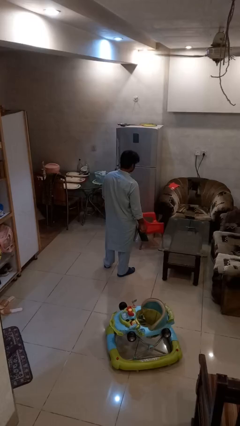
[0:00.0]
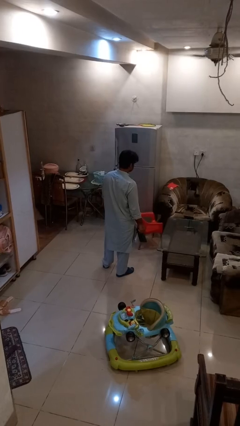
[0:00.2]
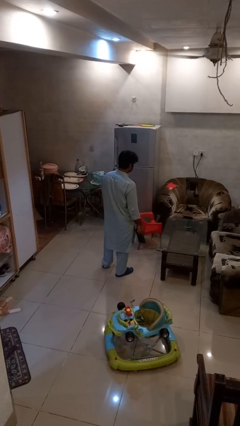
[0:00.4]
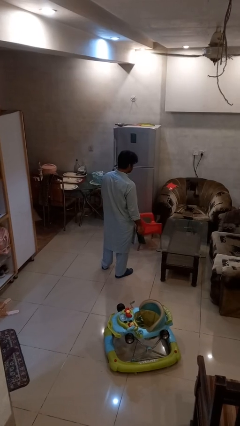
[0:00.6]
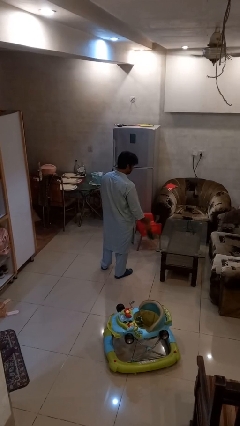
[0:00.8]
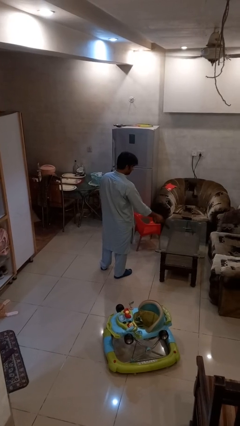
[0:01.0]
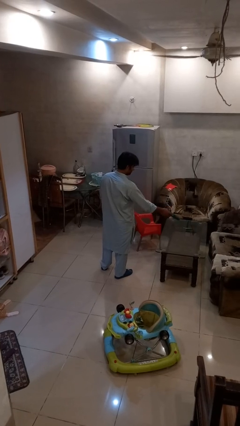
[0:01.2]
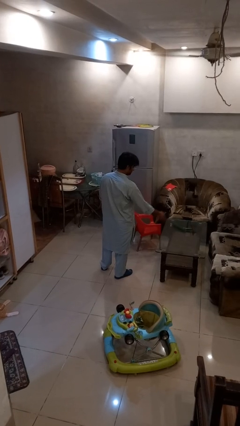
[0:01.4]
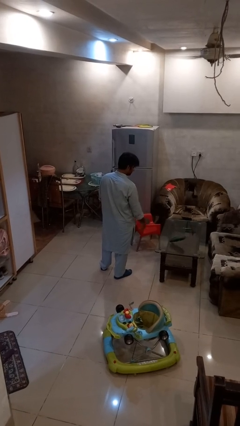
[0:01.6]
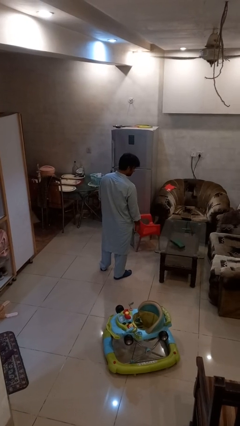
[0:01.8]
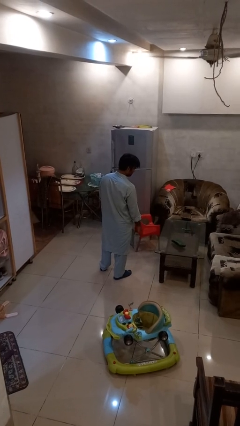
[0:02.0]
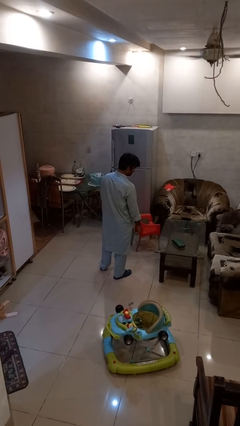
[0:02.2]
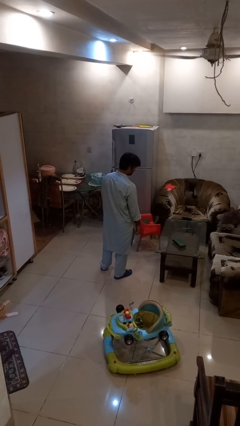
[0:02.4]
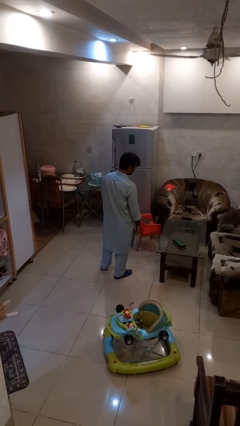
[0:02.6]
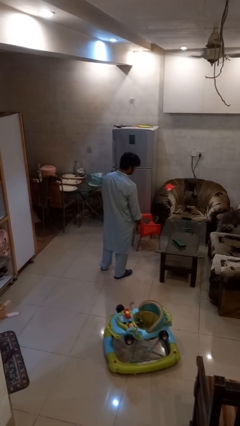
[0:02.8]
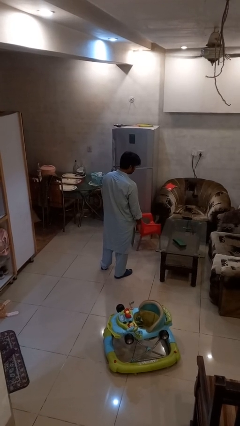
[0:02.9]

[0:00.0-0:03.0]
person throws object on table

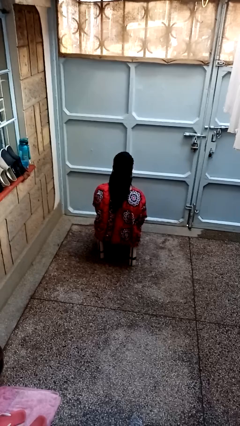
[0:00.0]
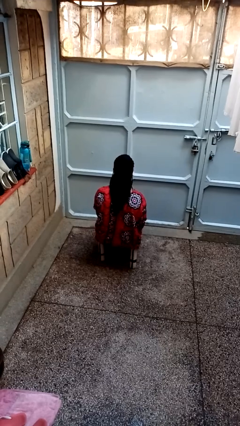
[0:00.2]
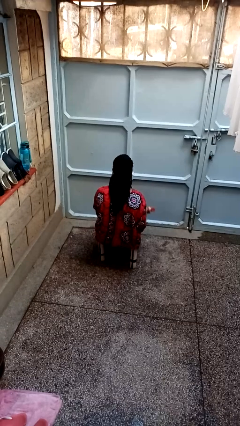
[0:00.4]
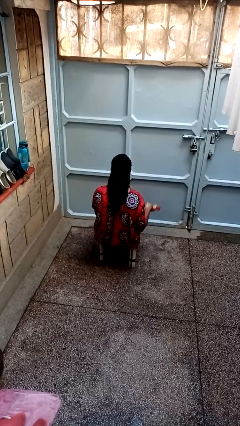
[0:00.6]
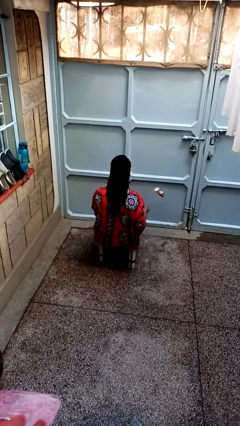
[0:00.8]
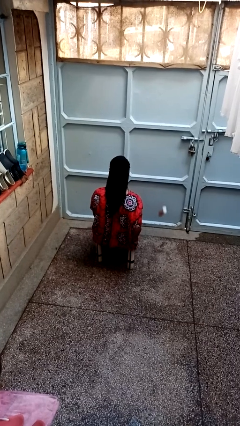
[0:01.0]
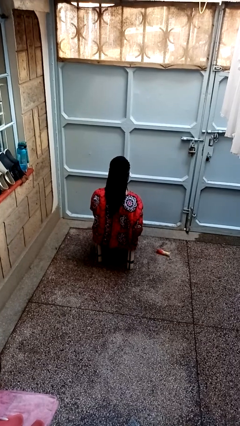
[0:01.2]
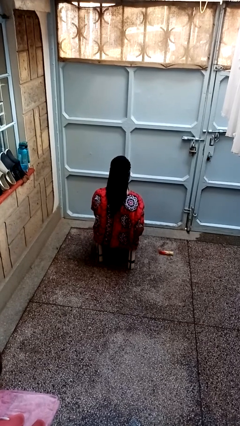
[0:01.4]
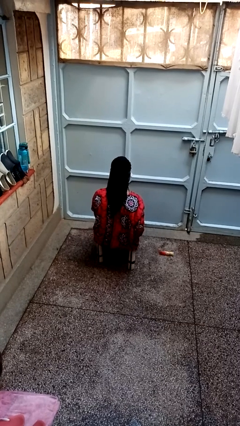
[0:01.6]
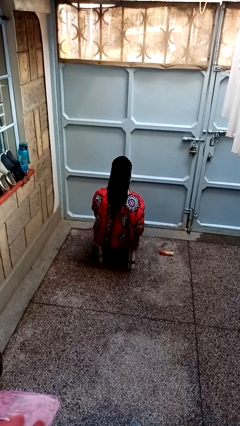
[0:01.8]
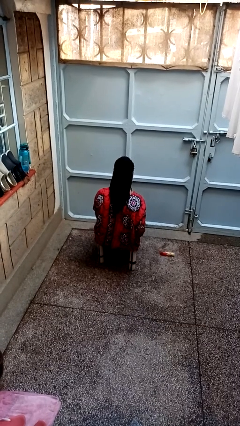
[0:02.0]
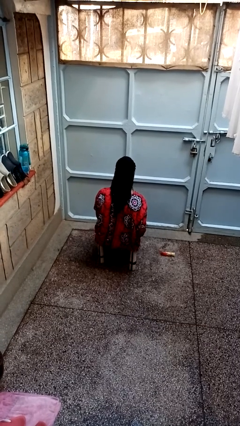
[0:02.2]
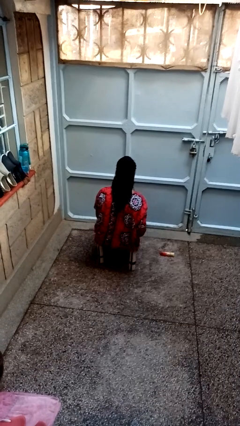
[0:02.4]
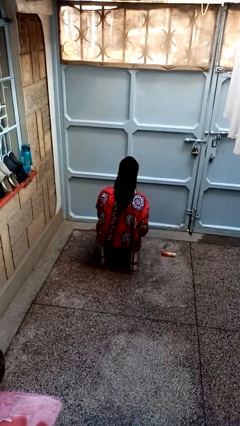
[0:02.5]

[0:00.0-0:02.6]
person throws object into air

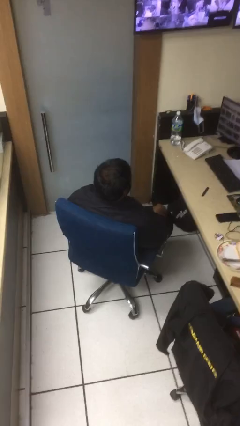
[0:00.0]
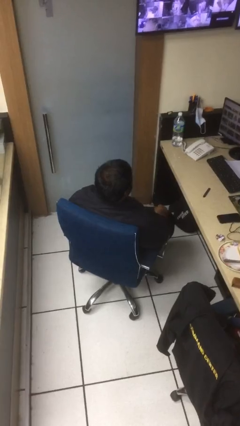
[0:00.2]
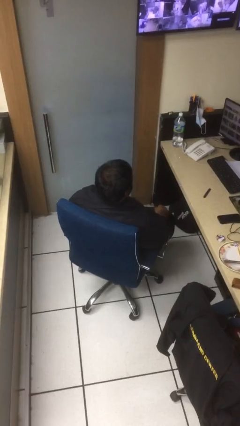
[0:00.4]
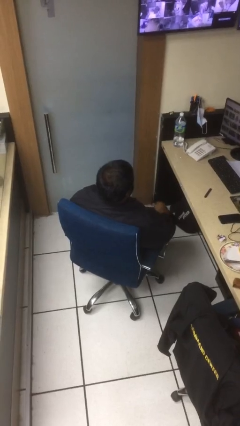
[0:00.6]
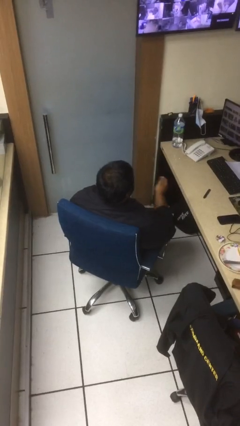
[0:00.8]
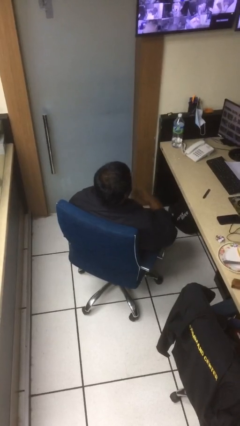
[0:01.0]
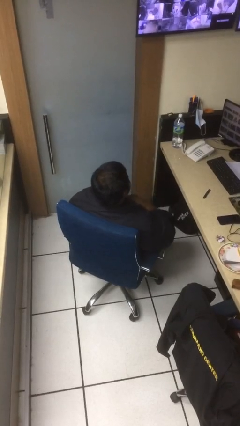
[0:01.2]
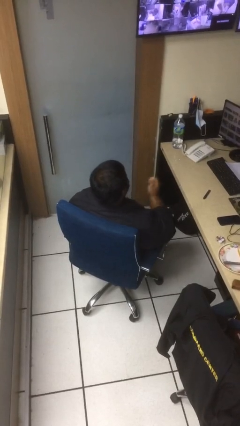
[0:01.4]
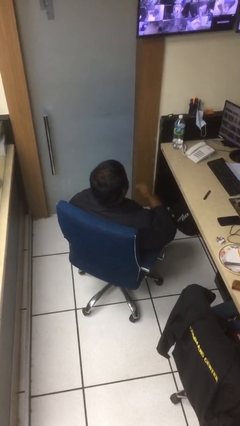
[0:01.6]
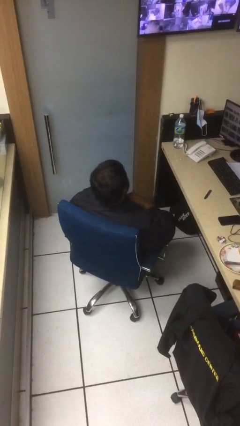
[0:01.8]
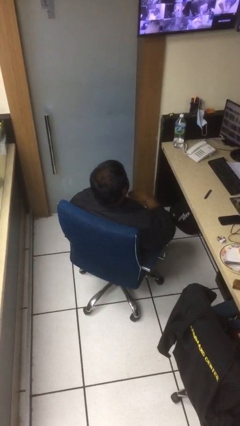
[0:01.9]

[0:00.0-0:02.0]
person drums on chest

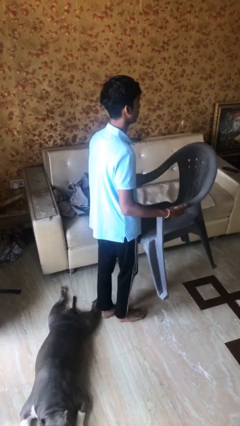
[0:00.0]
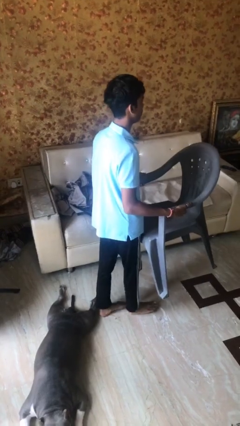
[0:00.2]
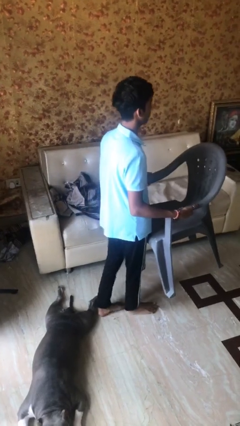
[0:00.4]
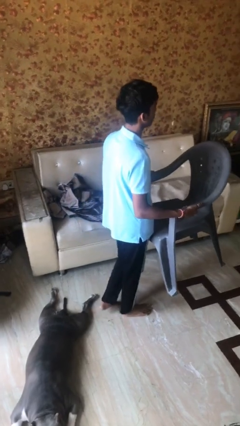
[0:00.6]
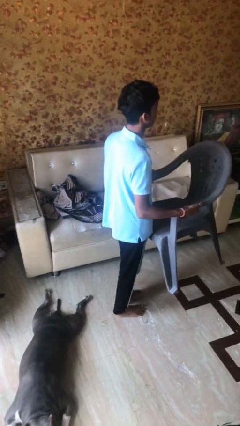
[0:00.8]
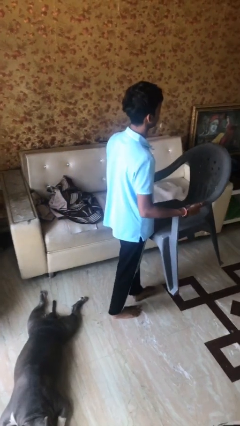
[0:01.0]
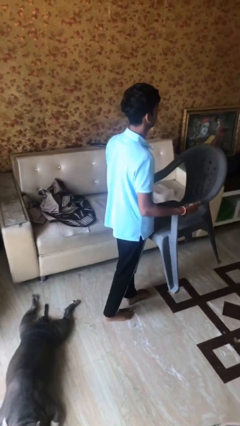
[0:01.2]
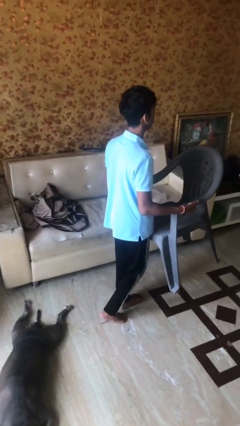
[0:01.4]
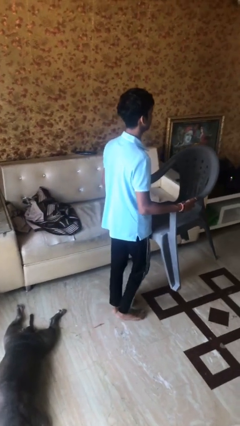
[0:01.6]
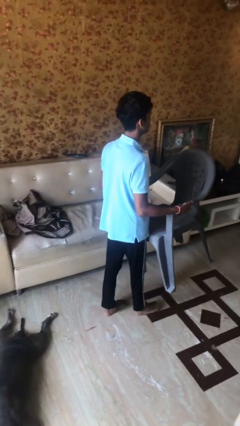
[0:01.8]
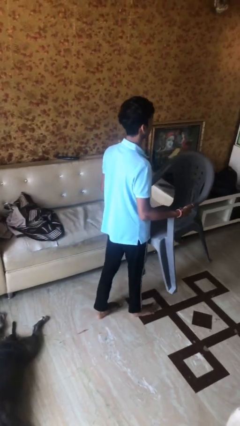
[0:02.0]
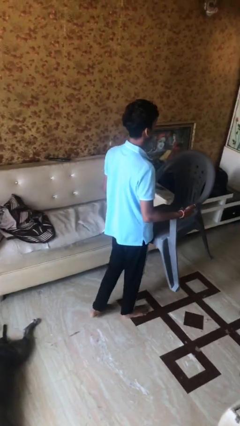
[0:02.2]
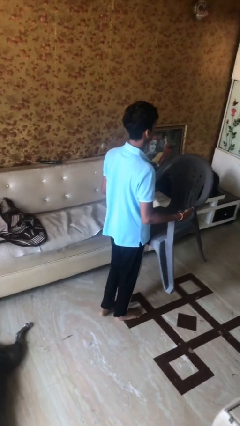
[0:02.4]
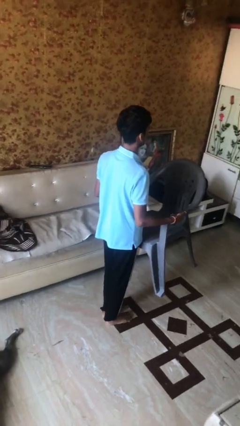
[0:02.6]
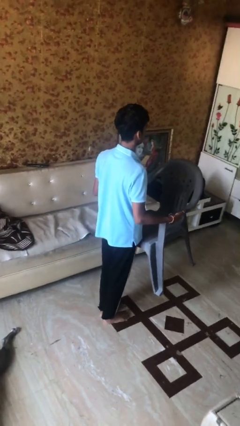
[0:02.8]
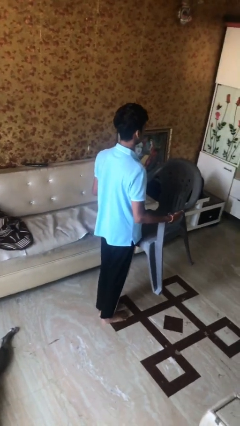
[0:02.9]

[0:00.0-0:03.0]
person carries furniture

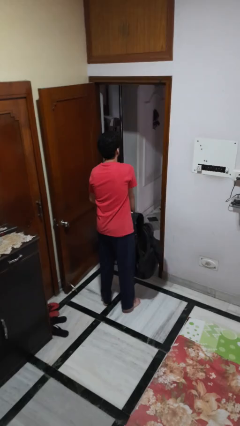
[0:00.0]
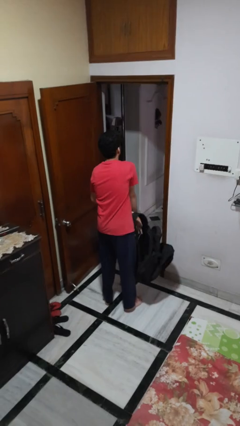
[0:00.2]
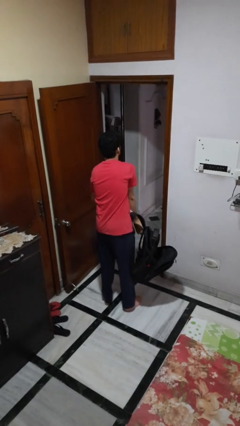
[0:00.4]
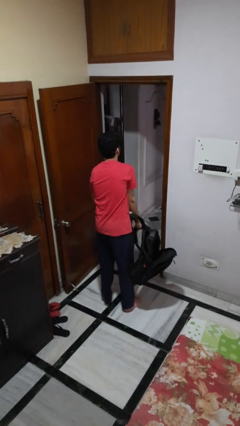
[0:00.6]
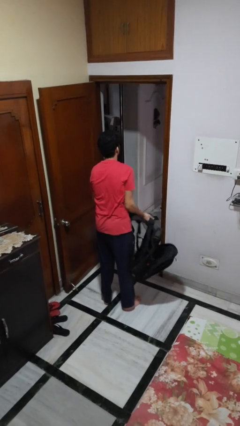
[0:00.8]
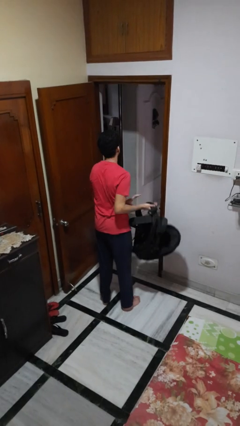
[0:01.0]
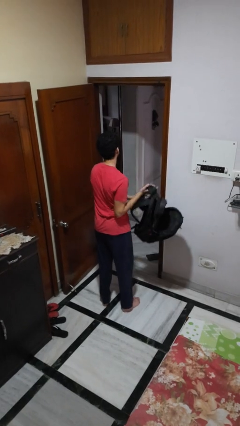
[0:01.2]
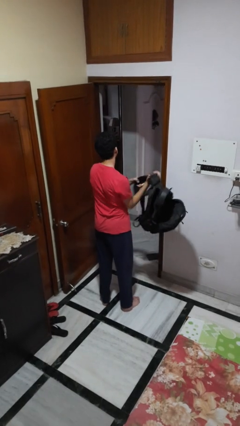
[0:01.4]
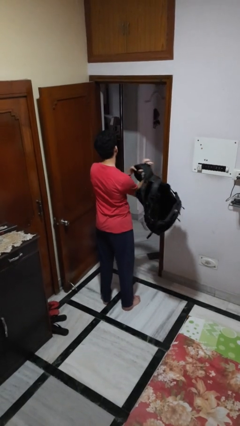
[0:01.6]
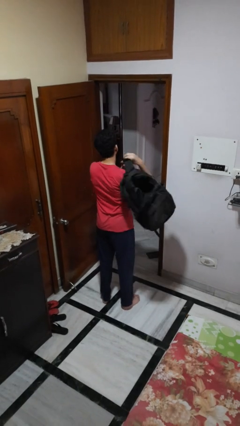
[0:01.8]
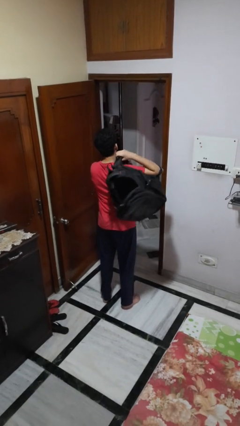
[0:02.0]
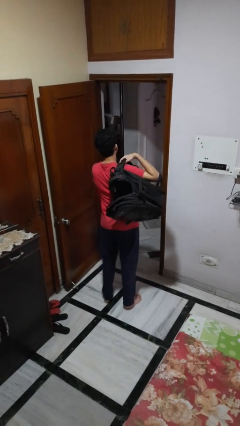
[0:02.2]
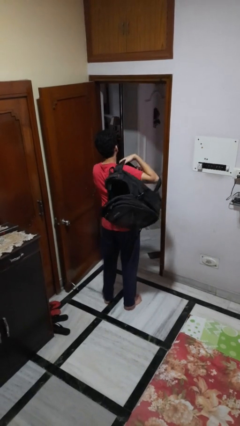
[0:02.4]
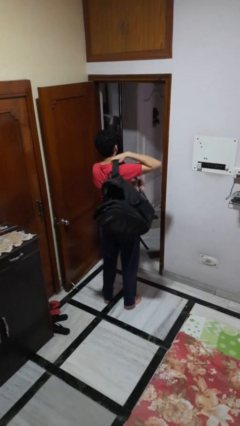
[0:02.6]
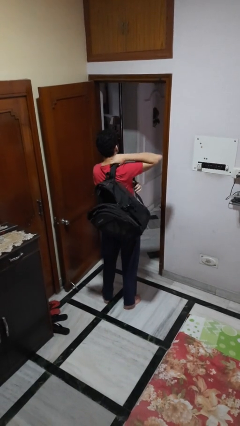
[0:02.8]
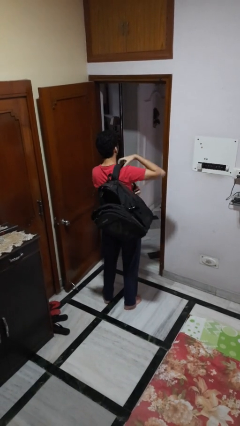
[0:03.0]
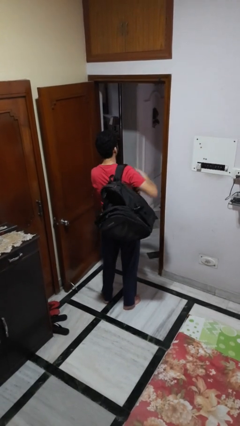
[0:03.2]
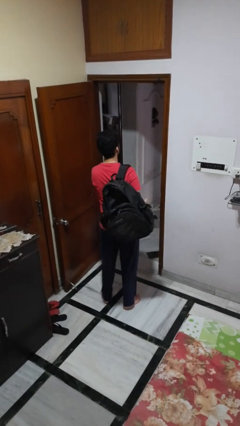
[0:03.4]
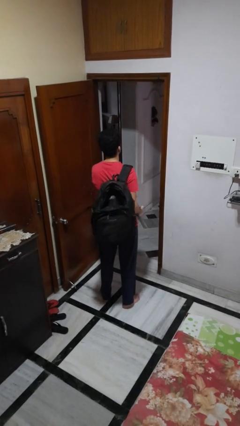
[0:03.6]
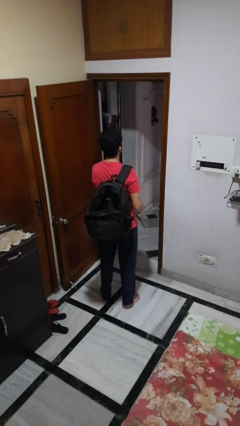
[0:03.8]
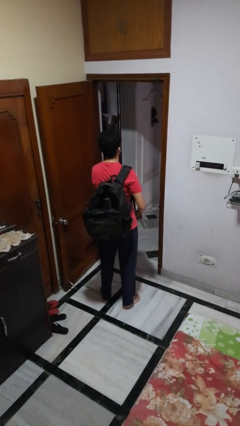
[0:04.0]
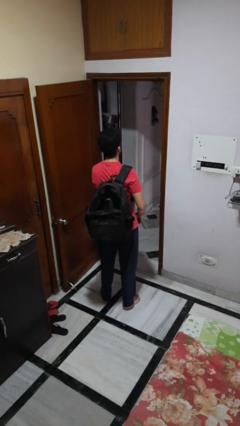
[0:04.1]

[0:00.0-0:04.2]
person puts on backpack

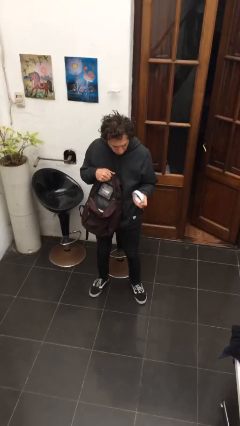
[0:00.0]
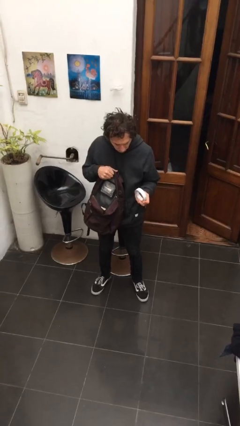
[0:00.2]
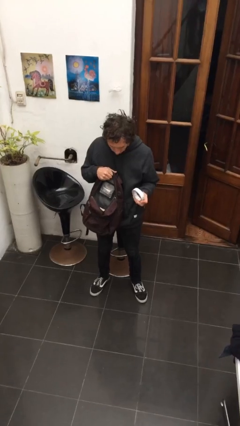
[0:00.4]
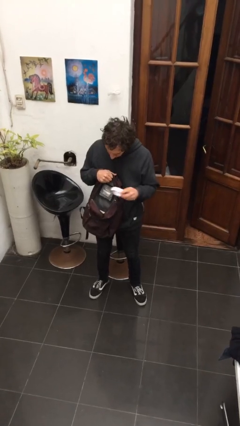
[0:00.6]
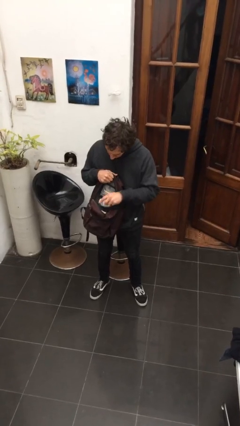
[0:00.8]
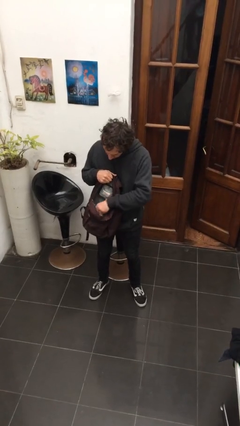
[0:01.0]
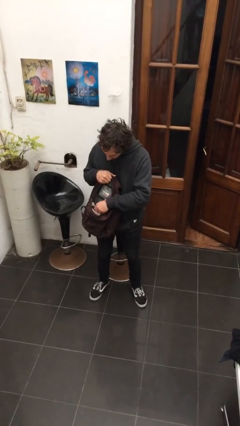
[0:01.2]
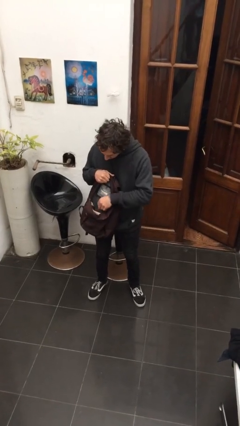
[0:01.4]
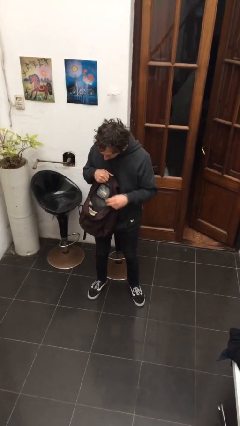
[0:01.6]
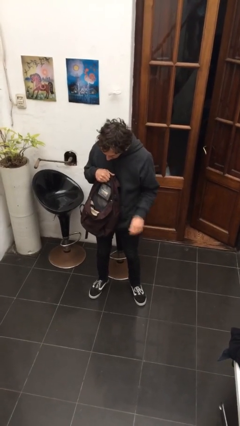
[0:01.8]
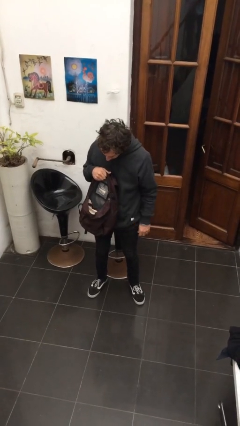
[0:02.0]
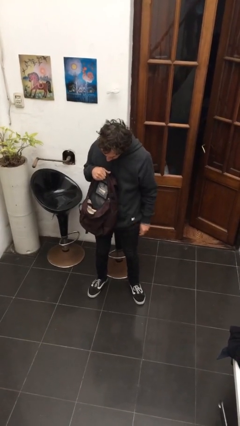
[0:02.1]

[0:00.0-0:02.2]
person puts object into backpack
